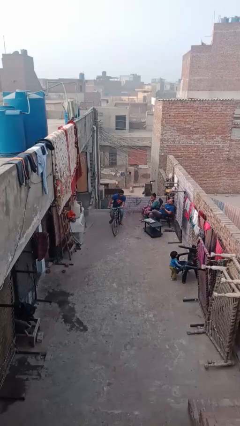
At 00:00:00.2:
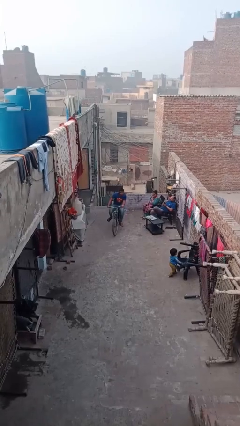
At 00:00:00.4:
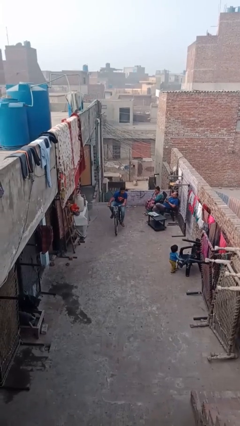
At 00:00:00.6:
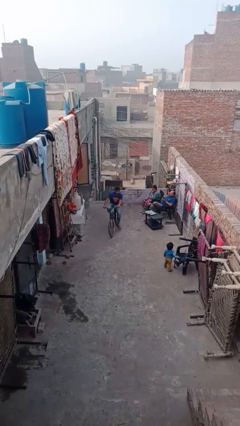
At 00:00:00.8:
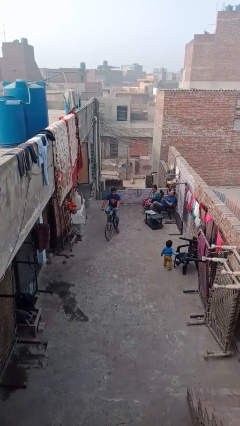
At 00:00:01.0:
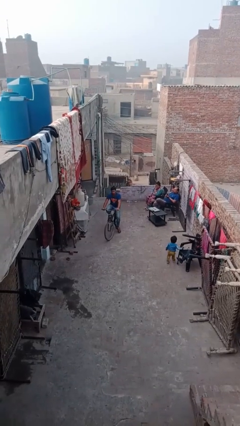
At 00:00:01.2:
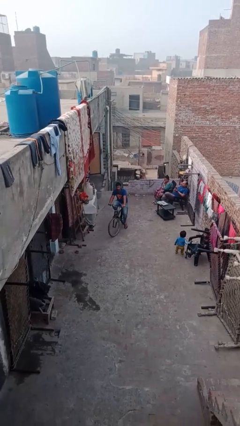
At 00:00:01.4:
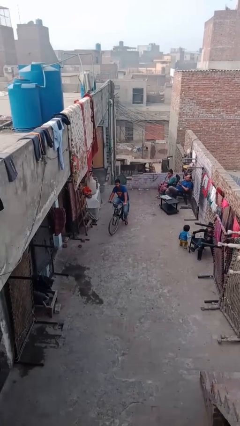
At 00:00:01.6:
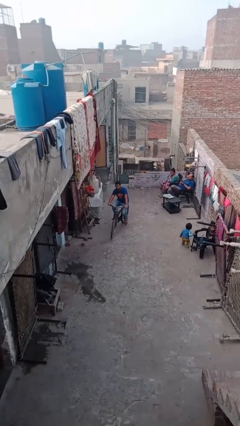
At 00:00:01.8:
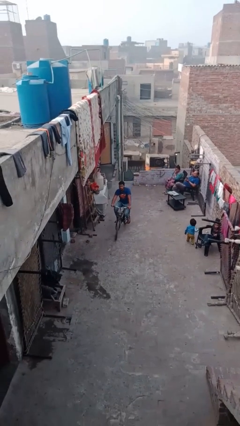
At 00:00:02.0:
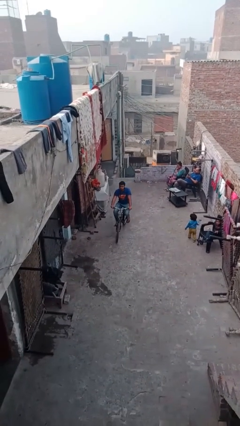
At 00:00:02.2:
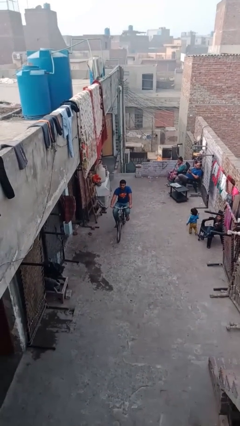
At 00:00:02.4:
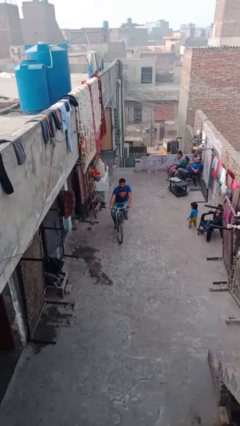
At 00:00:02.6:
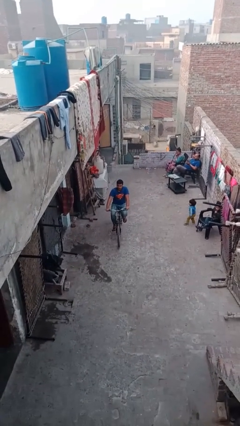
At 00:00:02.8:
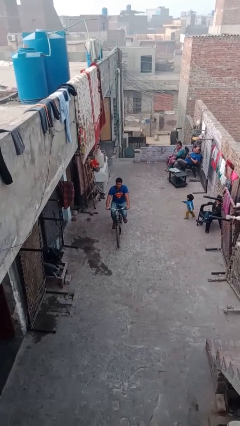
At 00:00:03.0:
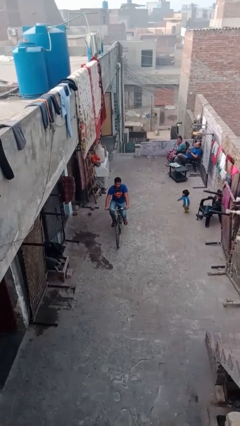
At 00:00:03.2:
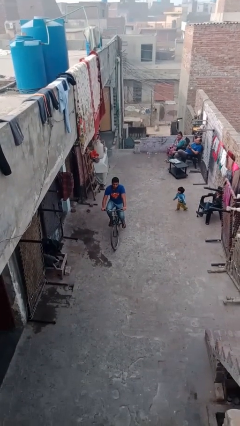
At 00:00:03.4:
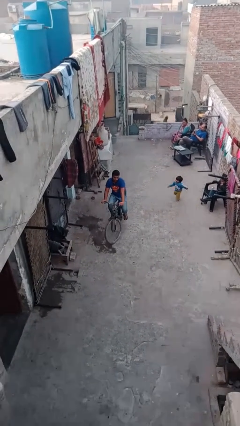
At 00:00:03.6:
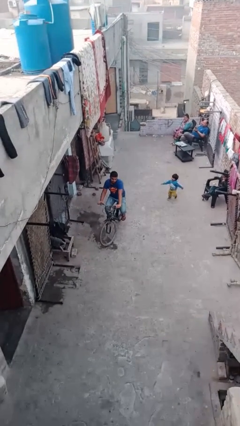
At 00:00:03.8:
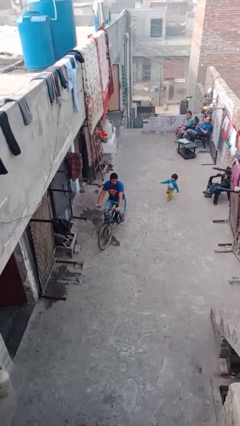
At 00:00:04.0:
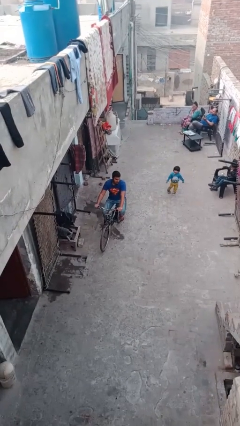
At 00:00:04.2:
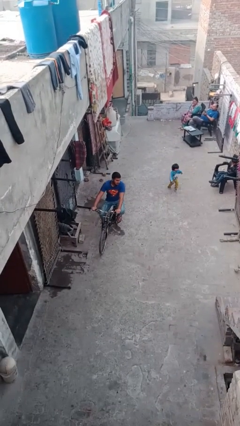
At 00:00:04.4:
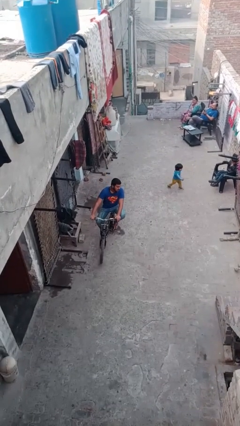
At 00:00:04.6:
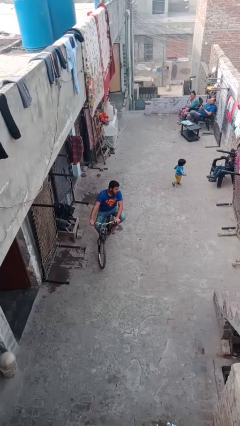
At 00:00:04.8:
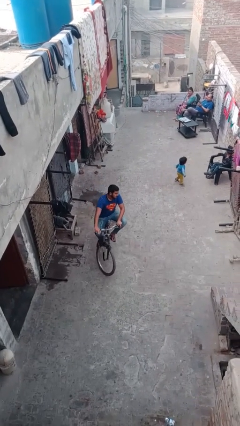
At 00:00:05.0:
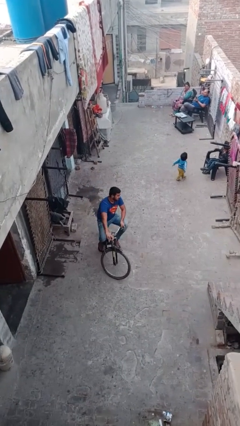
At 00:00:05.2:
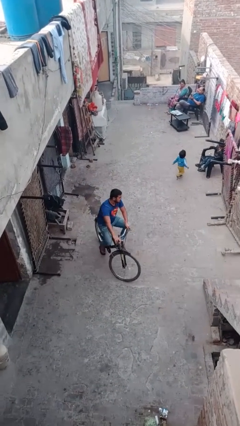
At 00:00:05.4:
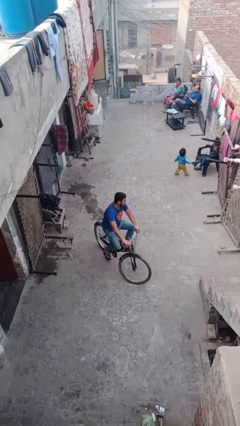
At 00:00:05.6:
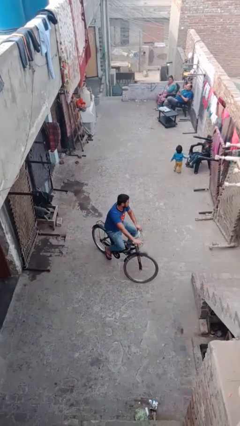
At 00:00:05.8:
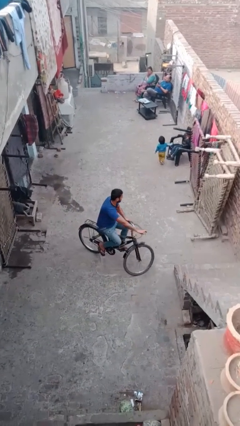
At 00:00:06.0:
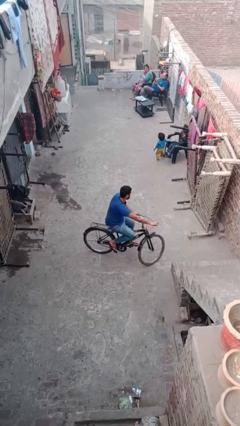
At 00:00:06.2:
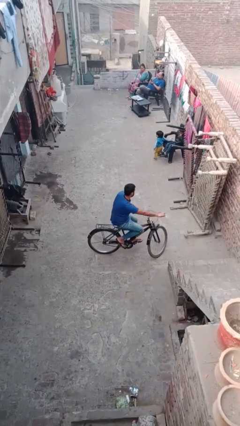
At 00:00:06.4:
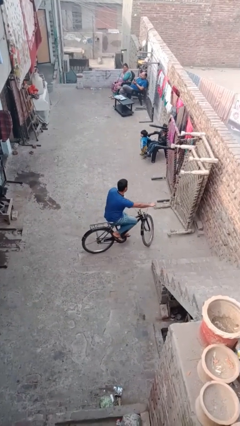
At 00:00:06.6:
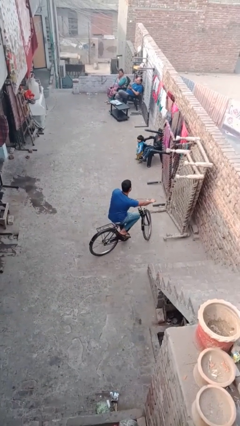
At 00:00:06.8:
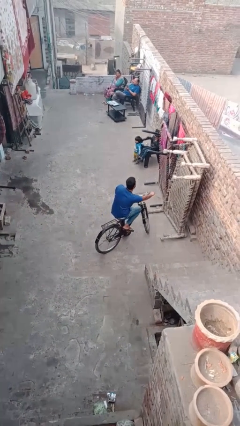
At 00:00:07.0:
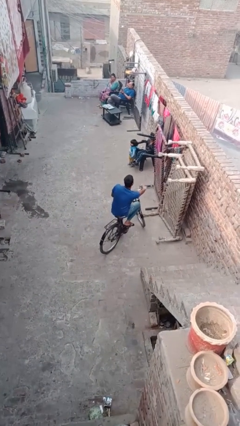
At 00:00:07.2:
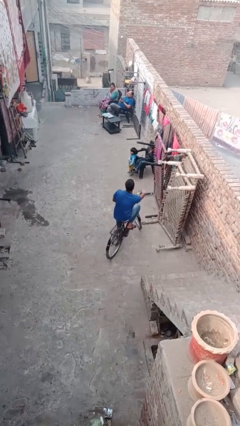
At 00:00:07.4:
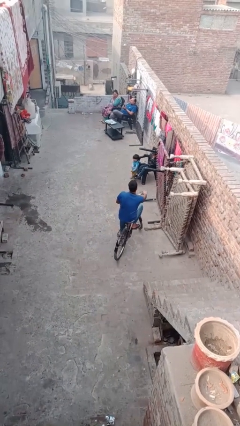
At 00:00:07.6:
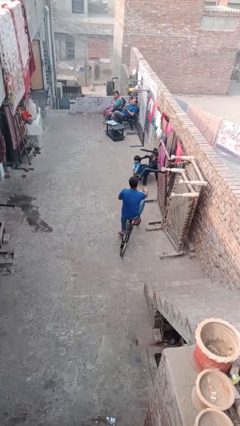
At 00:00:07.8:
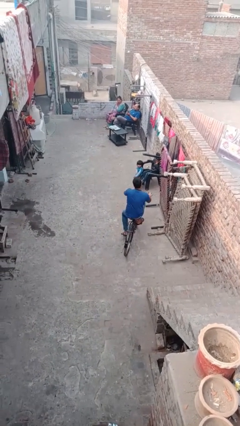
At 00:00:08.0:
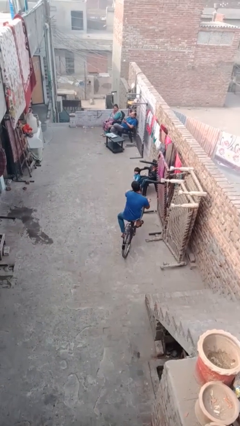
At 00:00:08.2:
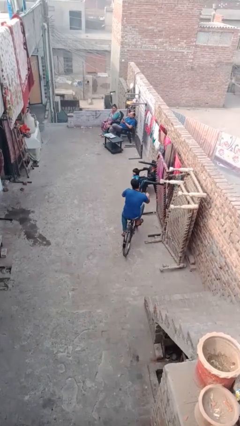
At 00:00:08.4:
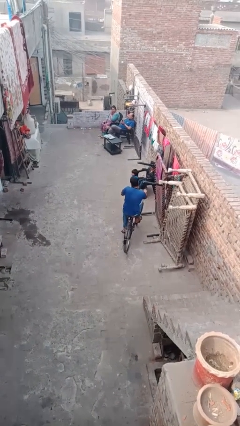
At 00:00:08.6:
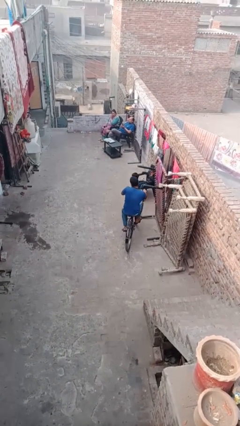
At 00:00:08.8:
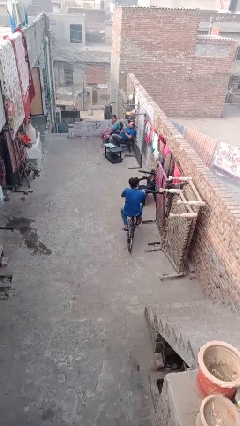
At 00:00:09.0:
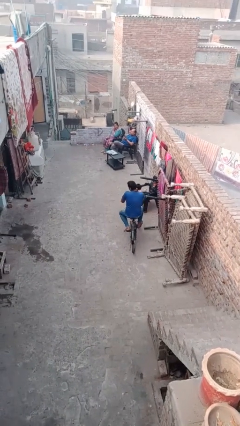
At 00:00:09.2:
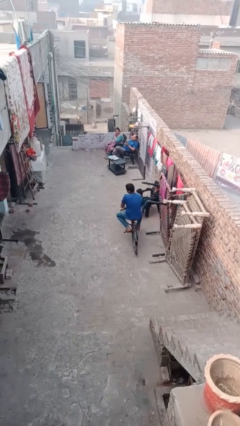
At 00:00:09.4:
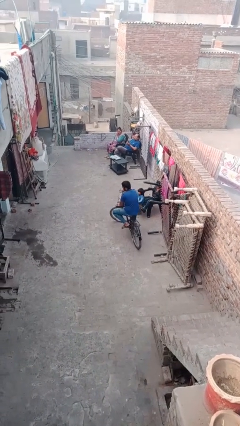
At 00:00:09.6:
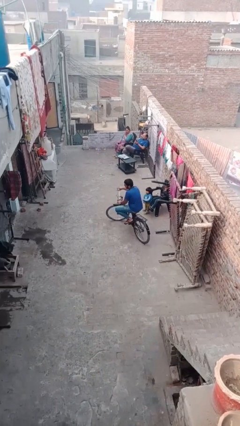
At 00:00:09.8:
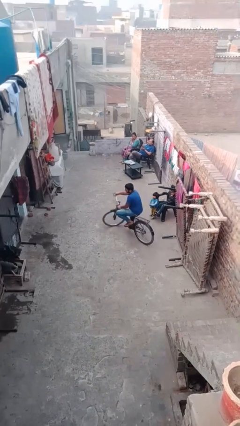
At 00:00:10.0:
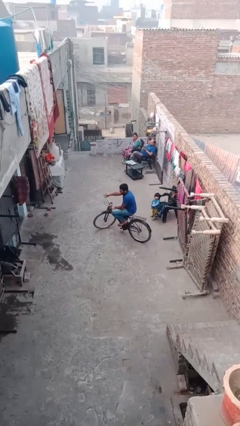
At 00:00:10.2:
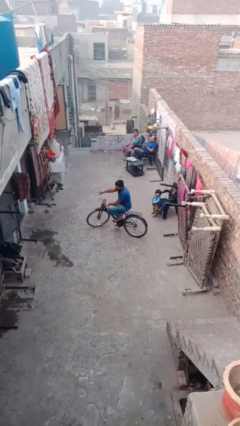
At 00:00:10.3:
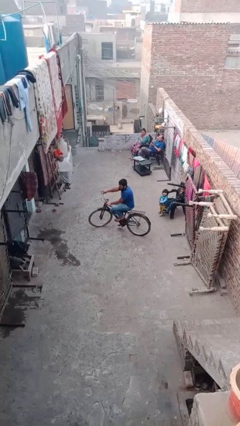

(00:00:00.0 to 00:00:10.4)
person rides bicycle

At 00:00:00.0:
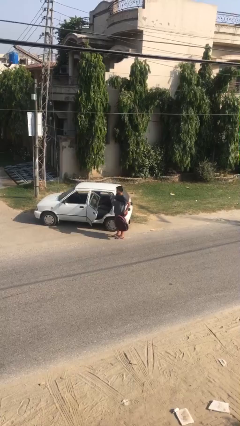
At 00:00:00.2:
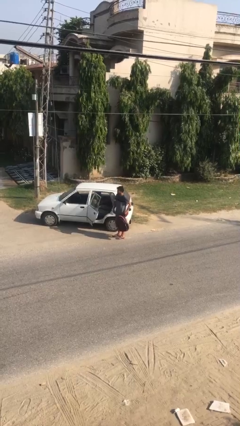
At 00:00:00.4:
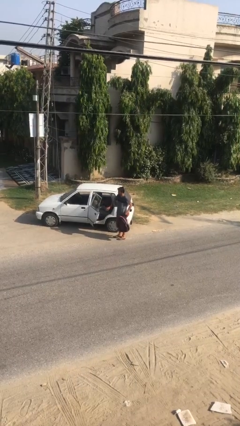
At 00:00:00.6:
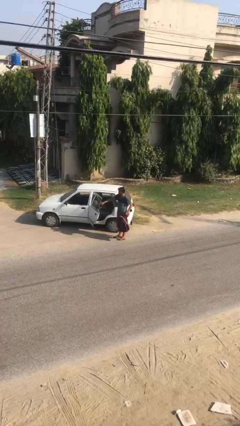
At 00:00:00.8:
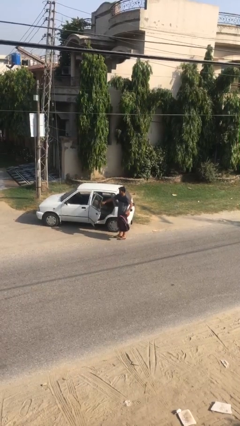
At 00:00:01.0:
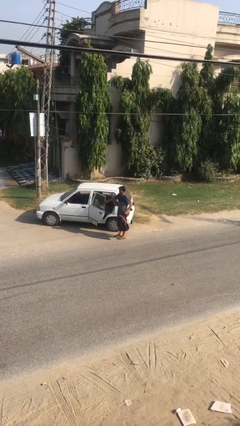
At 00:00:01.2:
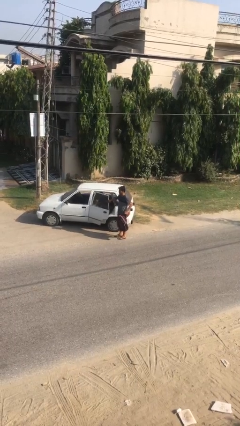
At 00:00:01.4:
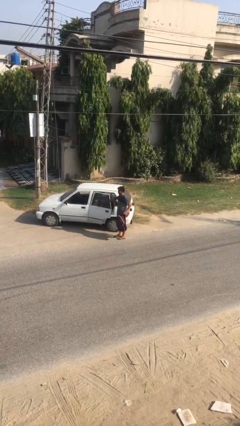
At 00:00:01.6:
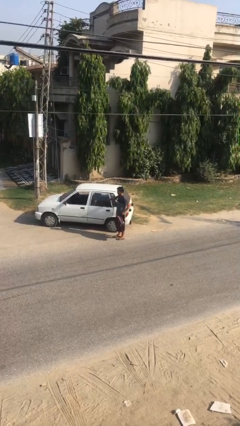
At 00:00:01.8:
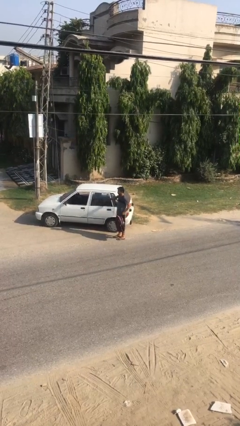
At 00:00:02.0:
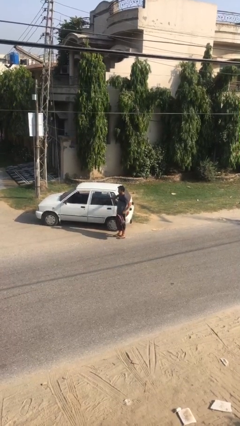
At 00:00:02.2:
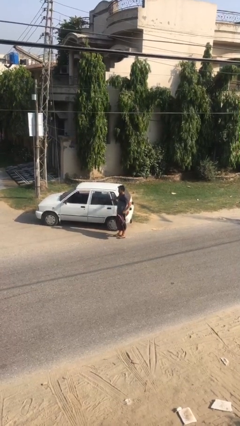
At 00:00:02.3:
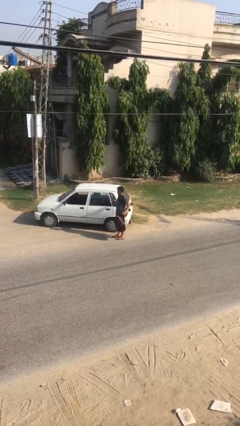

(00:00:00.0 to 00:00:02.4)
person closes car door

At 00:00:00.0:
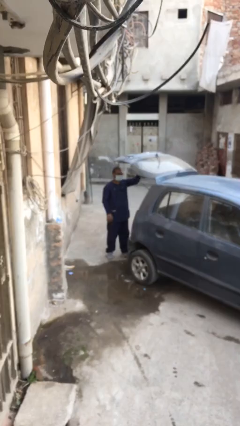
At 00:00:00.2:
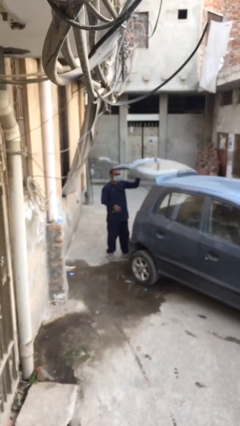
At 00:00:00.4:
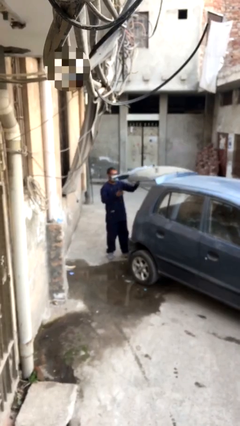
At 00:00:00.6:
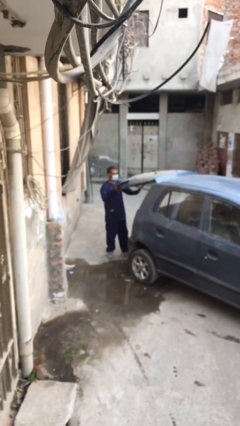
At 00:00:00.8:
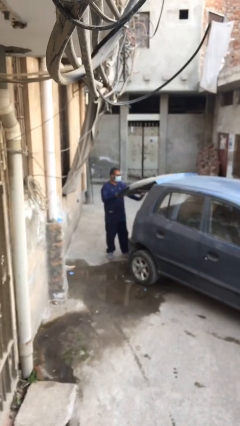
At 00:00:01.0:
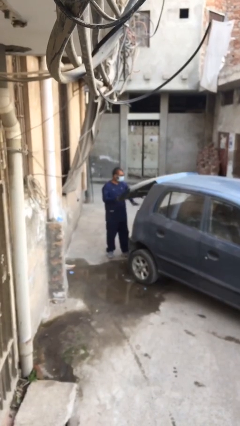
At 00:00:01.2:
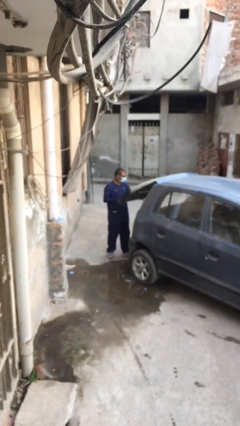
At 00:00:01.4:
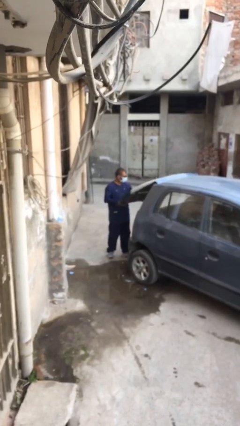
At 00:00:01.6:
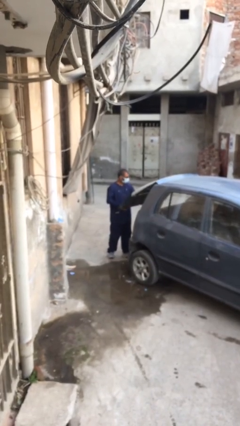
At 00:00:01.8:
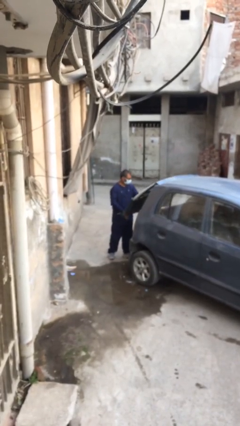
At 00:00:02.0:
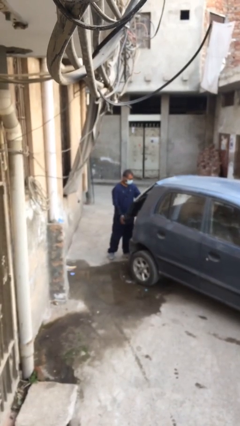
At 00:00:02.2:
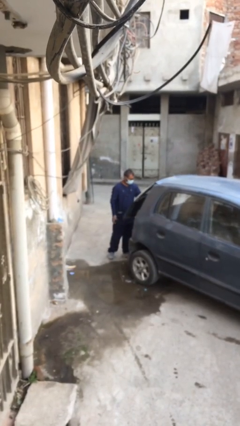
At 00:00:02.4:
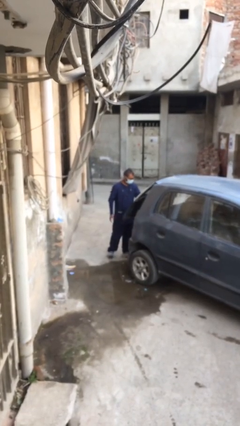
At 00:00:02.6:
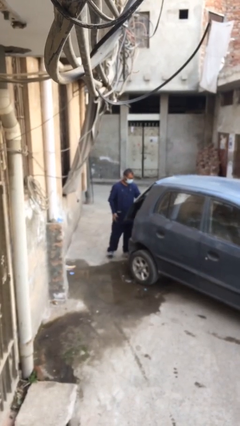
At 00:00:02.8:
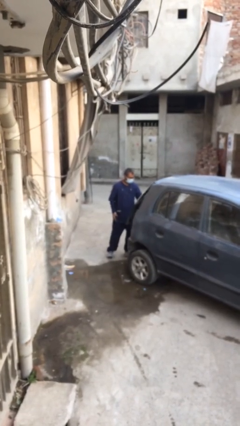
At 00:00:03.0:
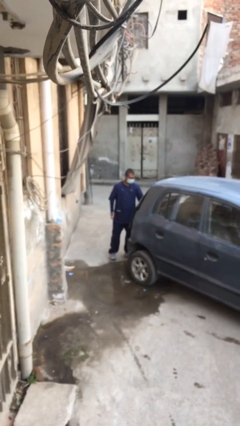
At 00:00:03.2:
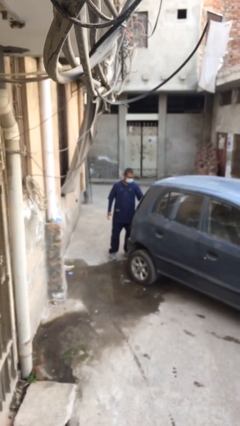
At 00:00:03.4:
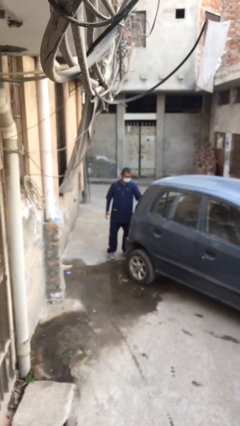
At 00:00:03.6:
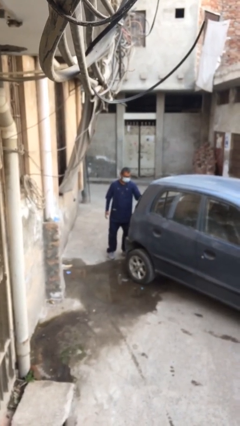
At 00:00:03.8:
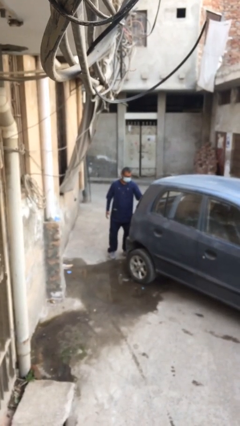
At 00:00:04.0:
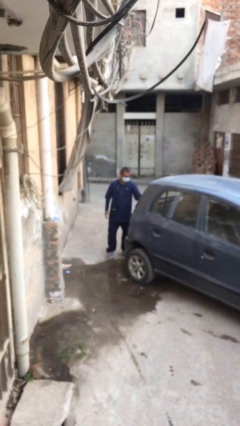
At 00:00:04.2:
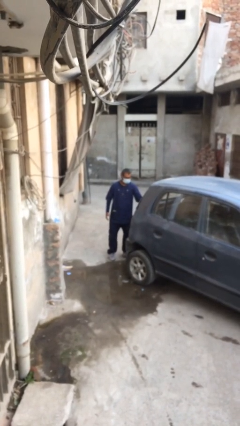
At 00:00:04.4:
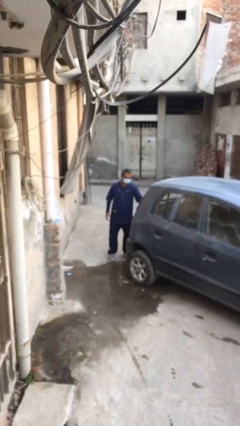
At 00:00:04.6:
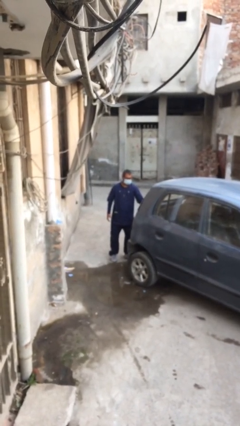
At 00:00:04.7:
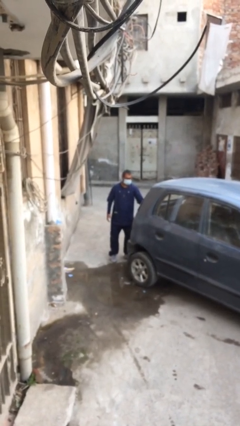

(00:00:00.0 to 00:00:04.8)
person closes car trunk
